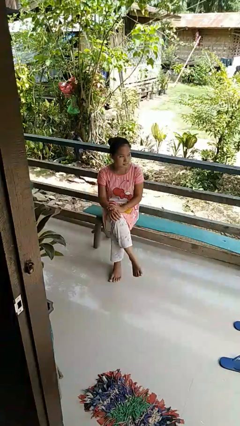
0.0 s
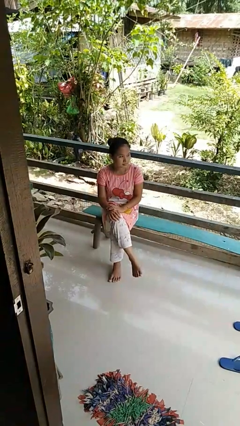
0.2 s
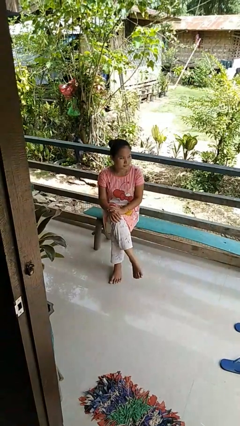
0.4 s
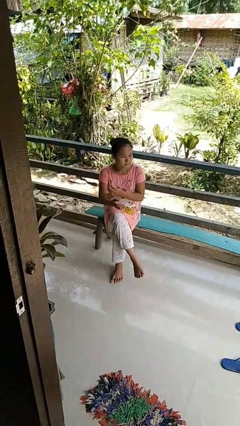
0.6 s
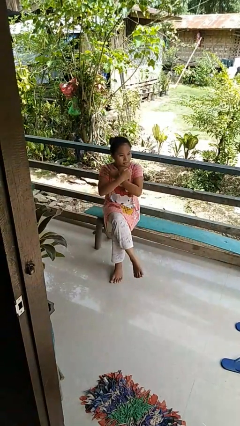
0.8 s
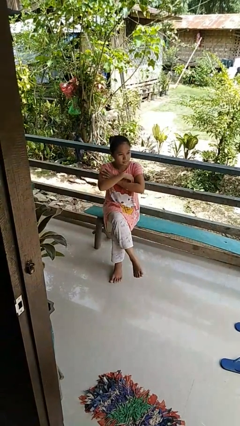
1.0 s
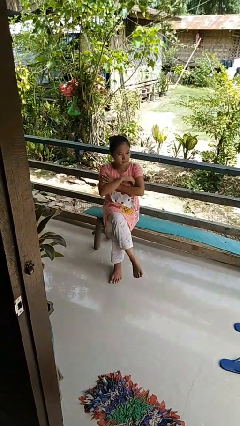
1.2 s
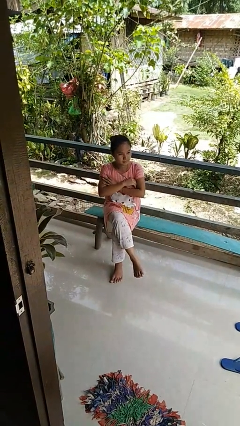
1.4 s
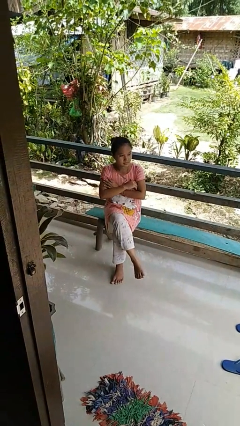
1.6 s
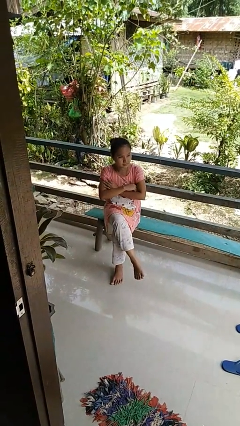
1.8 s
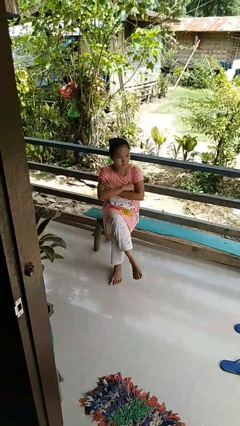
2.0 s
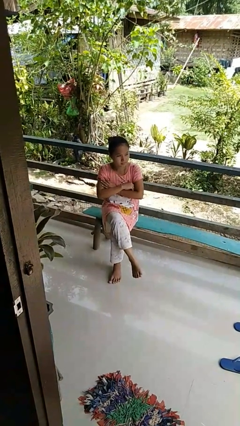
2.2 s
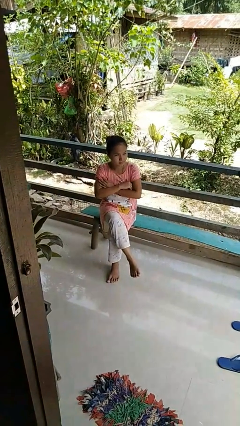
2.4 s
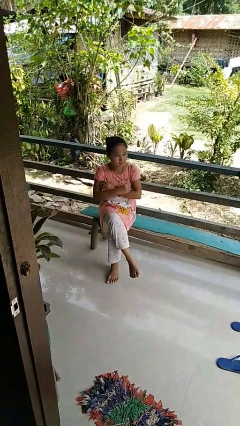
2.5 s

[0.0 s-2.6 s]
person crosses arms

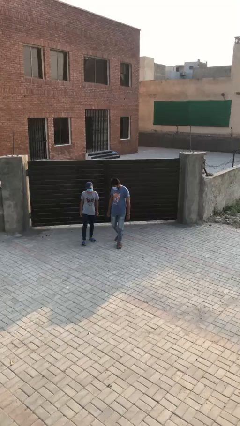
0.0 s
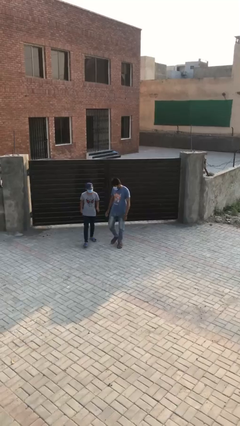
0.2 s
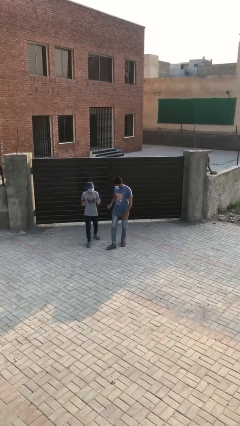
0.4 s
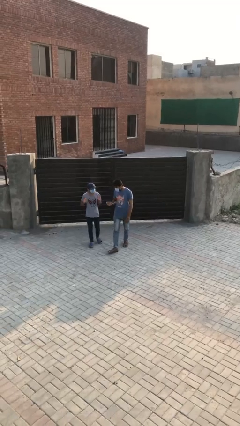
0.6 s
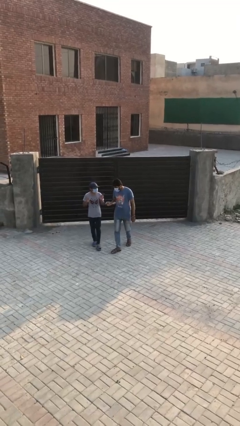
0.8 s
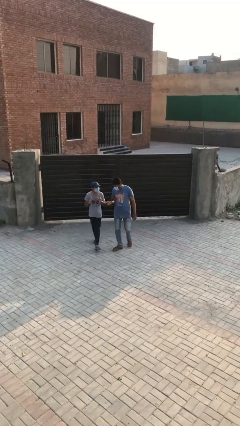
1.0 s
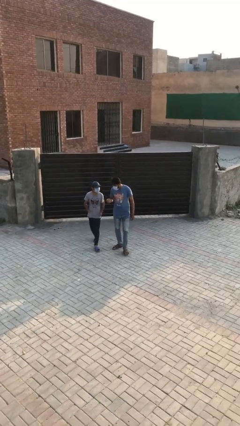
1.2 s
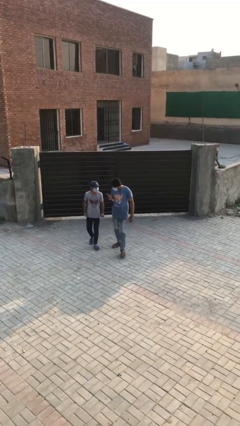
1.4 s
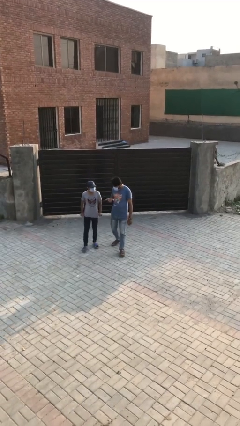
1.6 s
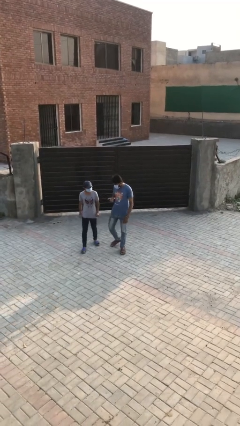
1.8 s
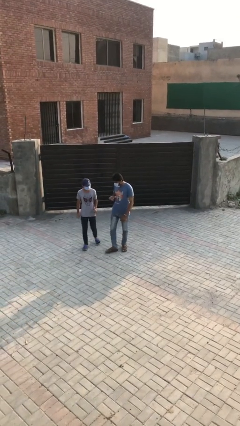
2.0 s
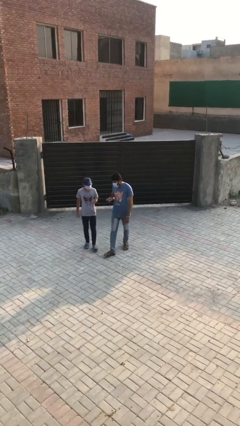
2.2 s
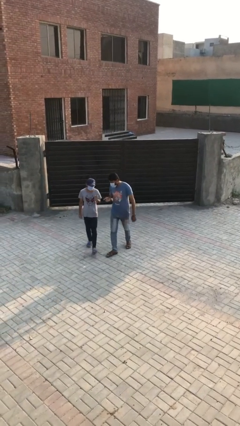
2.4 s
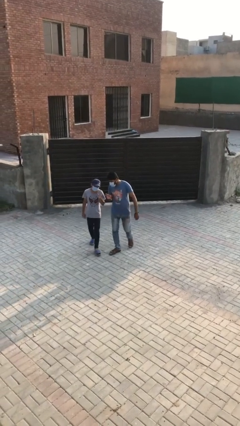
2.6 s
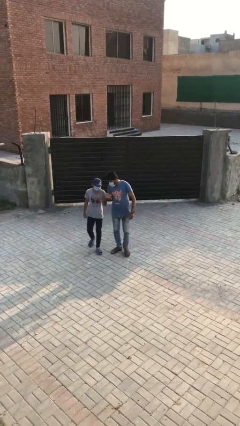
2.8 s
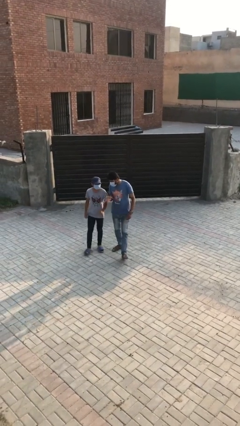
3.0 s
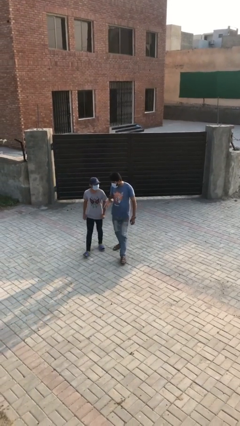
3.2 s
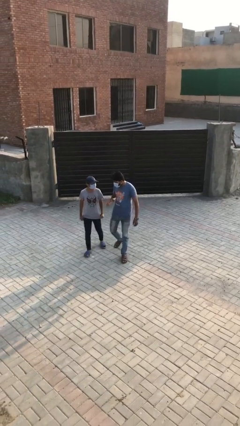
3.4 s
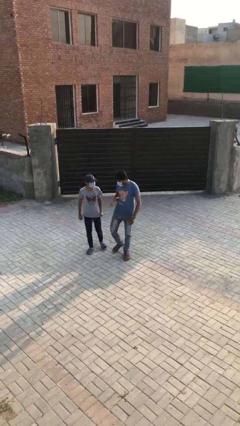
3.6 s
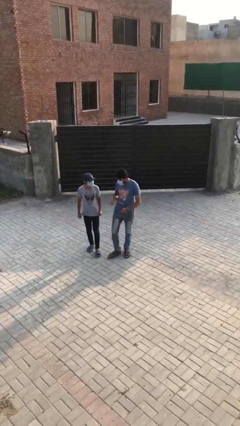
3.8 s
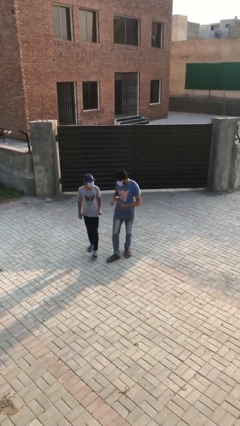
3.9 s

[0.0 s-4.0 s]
person talks to person

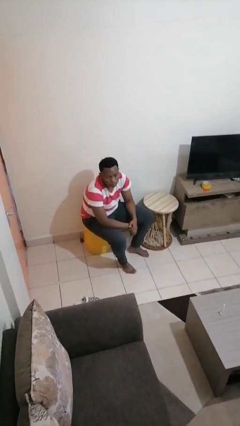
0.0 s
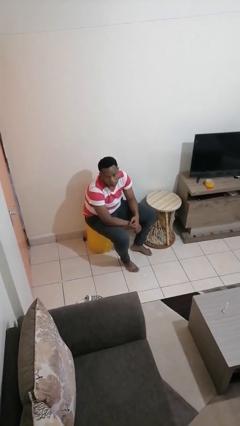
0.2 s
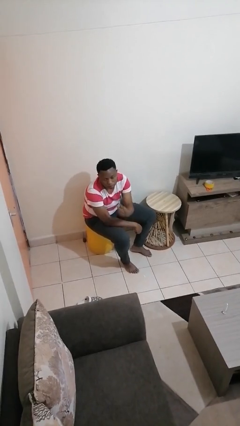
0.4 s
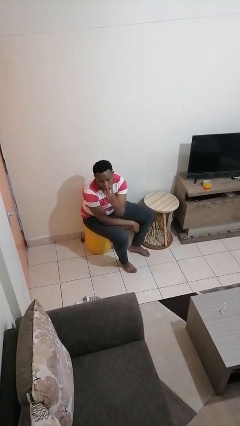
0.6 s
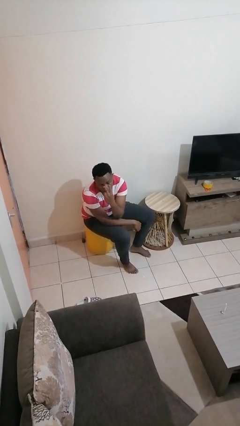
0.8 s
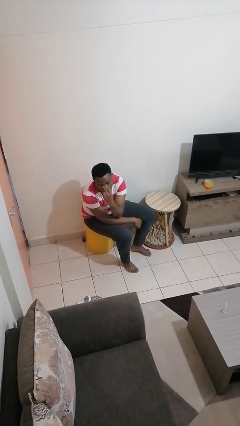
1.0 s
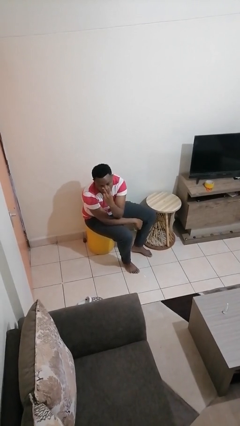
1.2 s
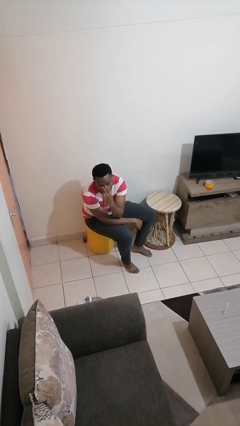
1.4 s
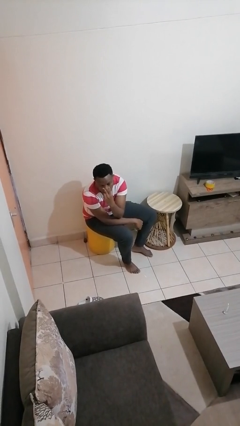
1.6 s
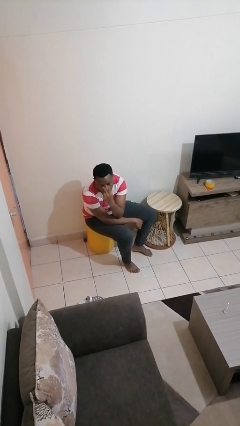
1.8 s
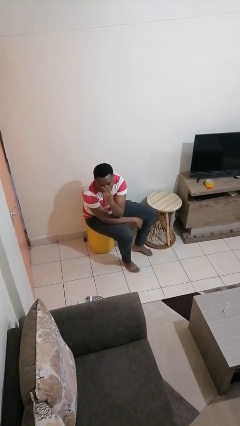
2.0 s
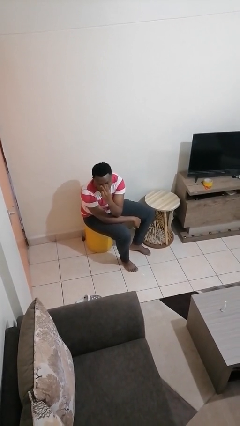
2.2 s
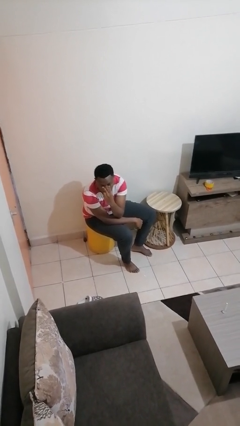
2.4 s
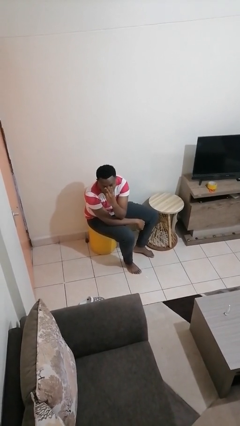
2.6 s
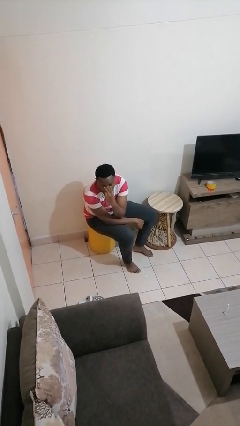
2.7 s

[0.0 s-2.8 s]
person gestures watch closely

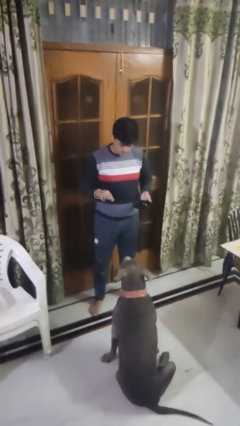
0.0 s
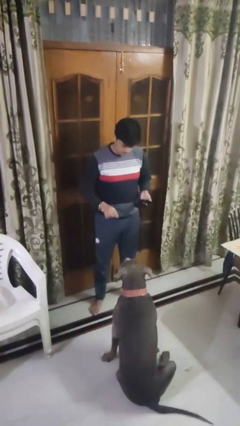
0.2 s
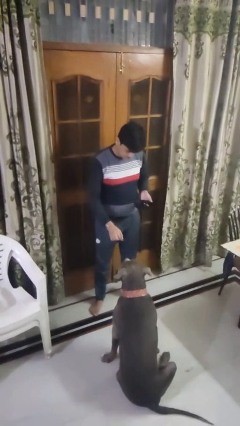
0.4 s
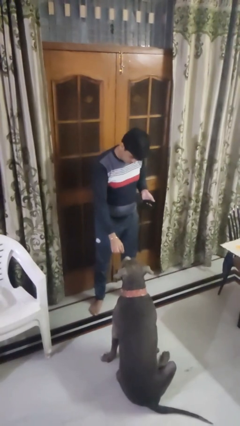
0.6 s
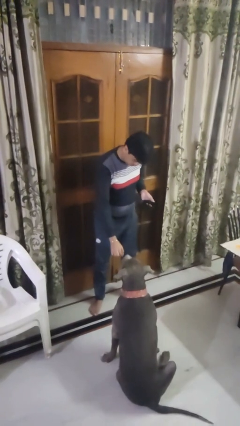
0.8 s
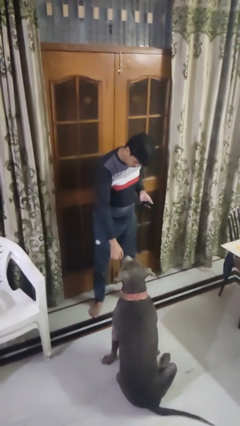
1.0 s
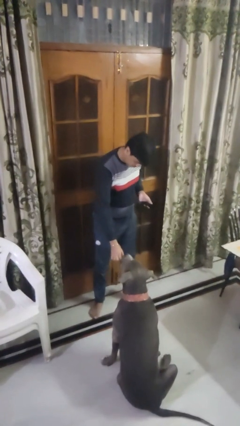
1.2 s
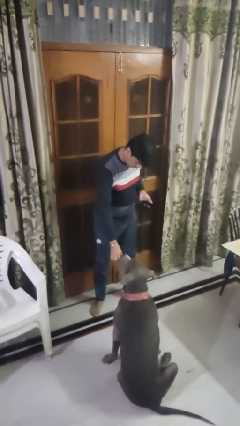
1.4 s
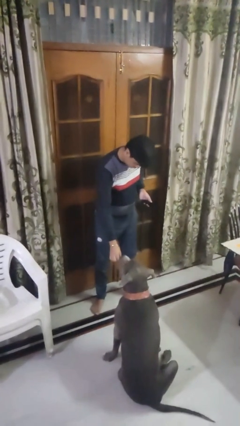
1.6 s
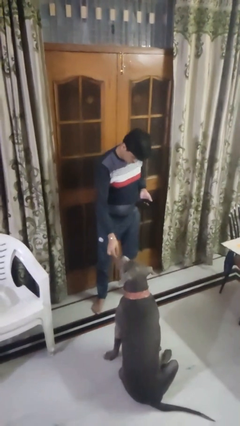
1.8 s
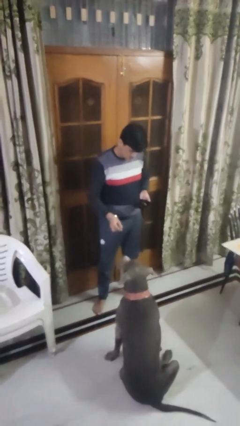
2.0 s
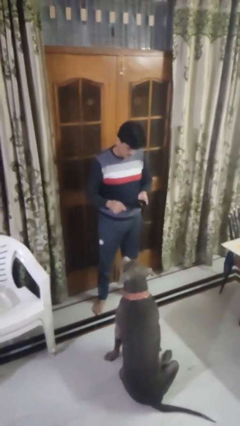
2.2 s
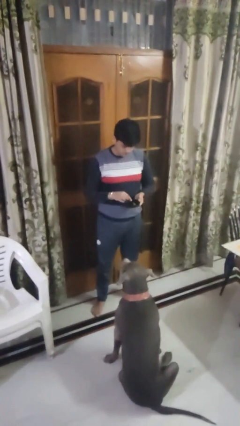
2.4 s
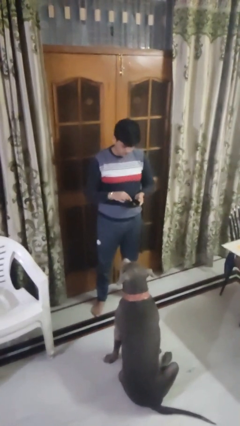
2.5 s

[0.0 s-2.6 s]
person feeds dog

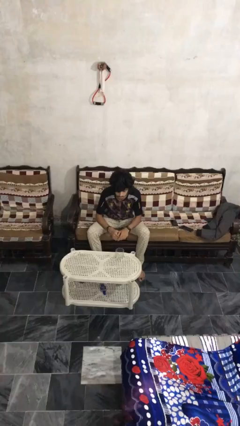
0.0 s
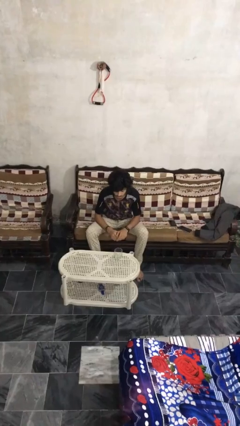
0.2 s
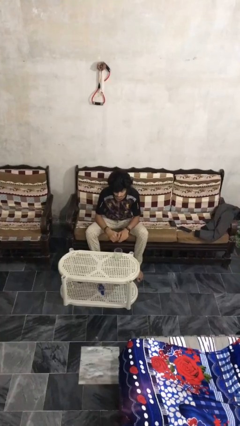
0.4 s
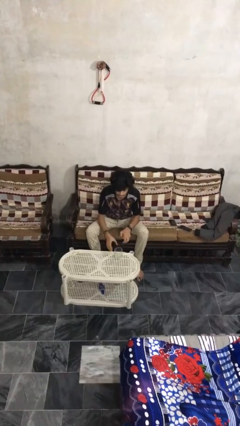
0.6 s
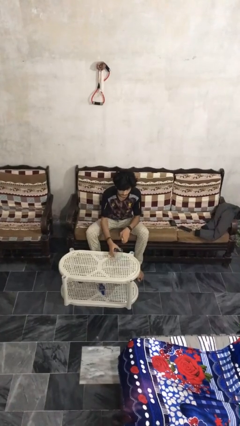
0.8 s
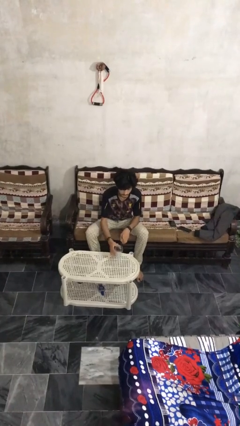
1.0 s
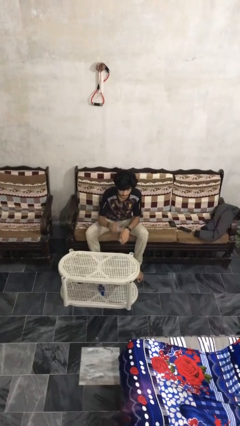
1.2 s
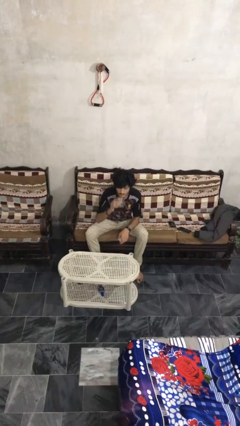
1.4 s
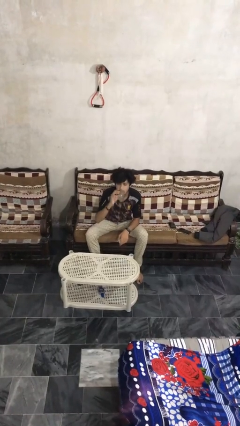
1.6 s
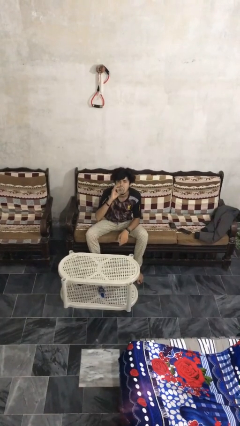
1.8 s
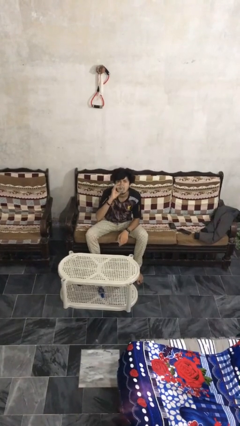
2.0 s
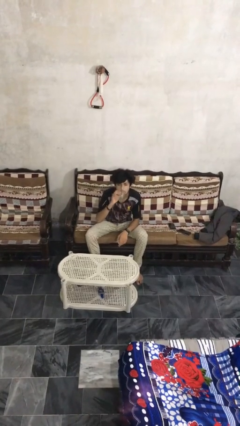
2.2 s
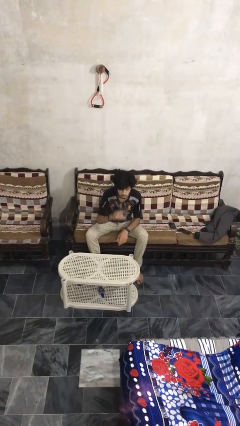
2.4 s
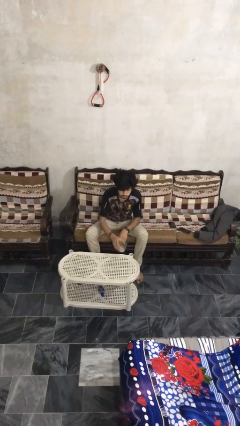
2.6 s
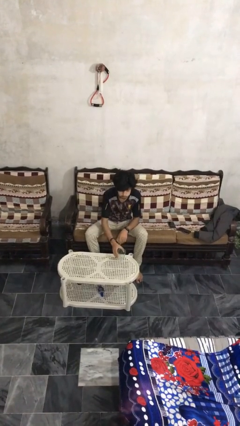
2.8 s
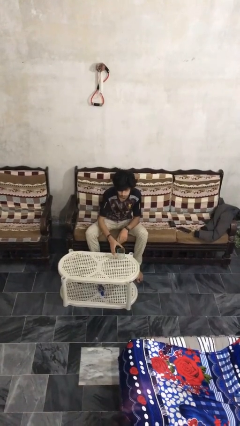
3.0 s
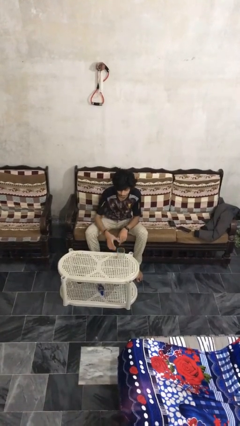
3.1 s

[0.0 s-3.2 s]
person drinks from cup

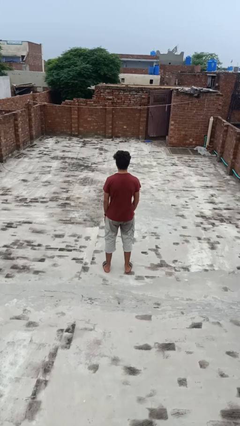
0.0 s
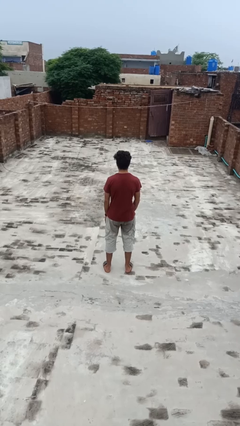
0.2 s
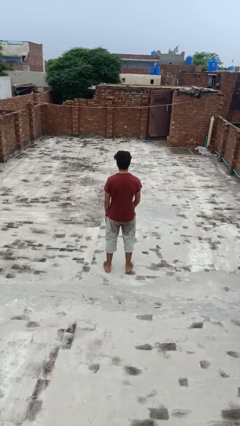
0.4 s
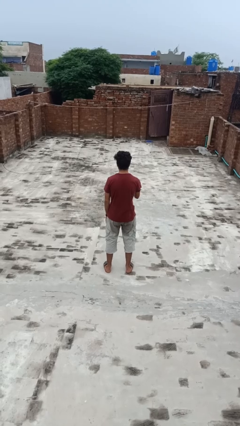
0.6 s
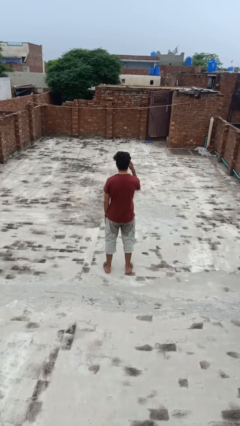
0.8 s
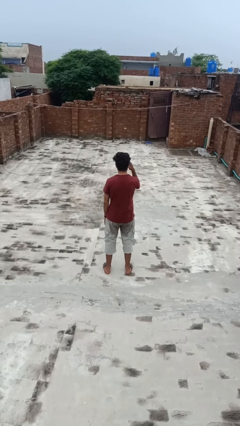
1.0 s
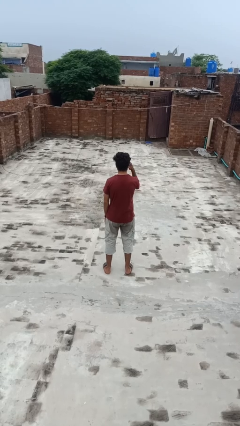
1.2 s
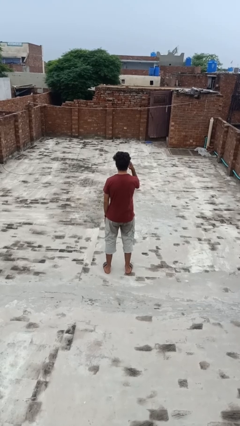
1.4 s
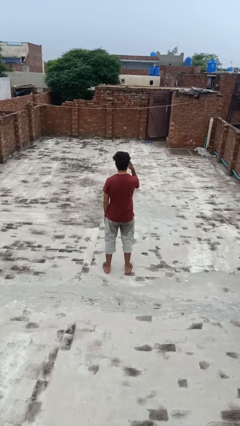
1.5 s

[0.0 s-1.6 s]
person salutes

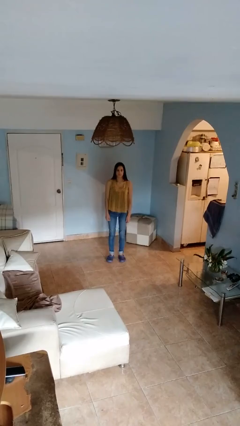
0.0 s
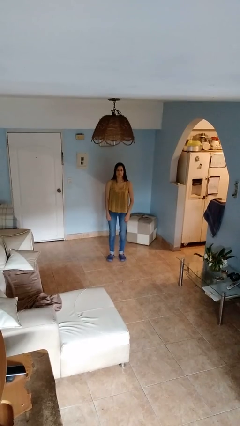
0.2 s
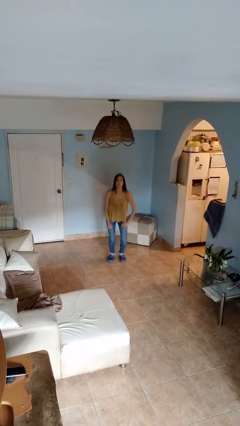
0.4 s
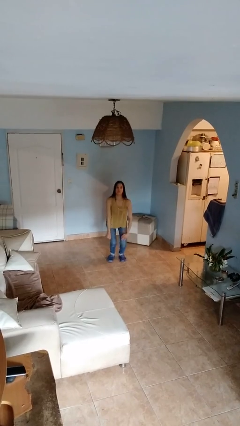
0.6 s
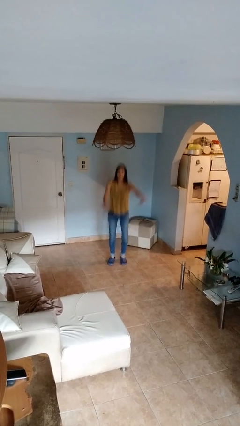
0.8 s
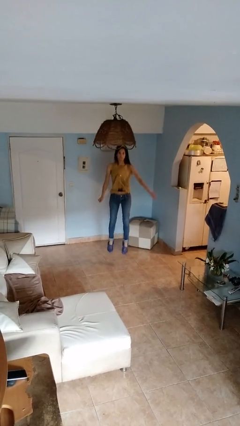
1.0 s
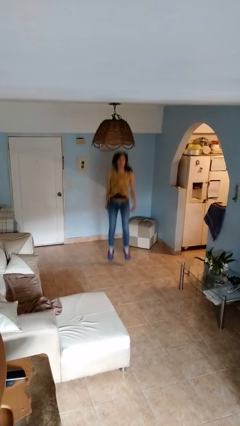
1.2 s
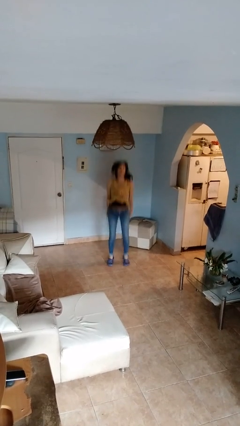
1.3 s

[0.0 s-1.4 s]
person jumps
